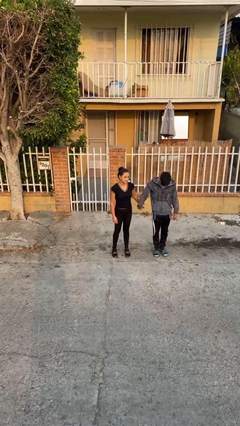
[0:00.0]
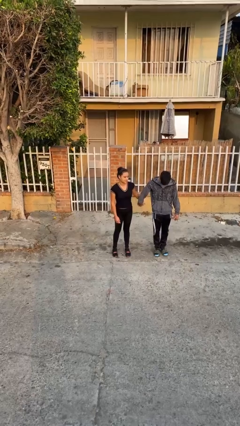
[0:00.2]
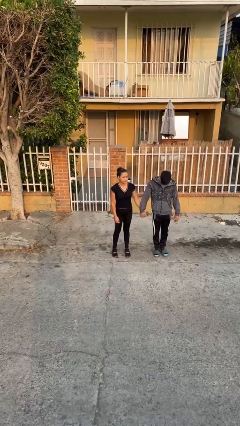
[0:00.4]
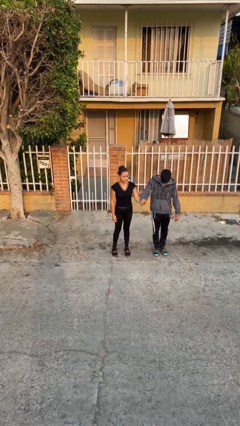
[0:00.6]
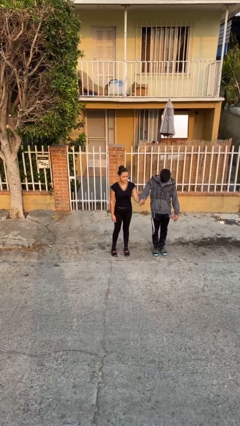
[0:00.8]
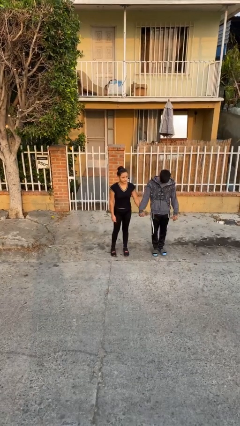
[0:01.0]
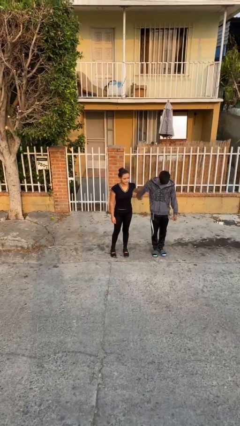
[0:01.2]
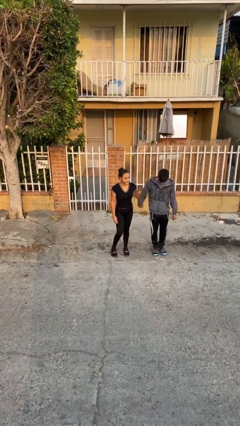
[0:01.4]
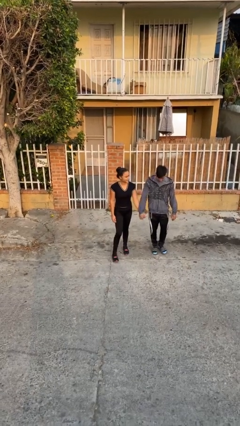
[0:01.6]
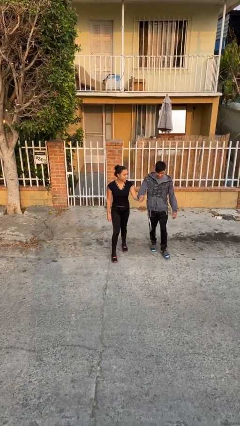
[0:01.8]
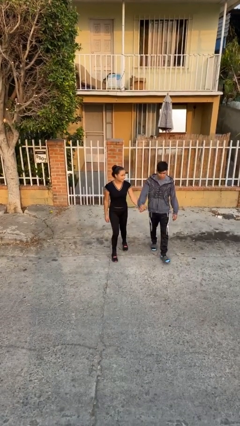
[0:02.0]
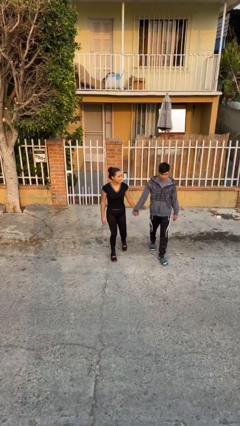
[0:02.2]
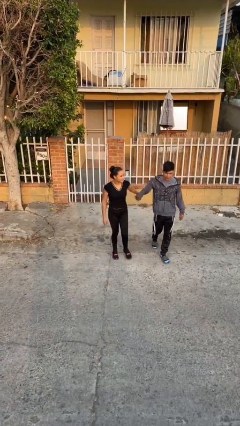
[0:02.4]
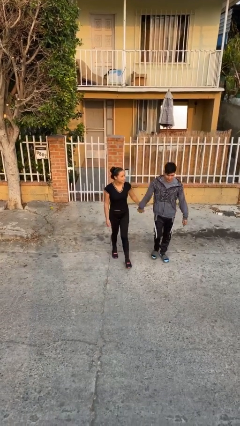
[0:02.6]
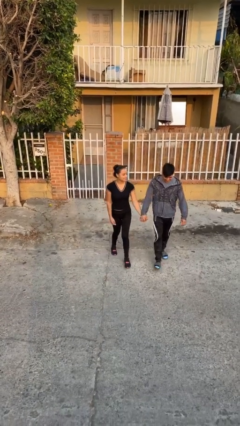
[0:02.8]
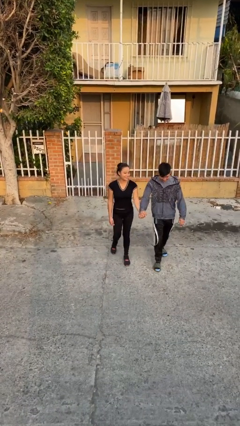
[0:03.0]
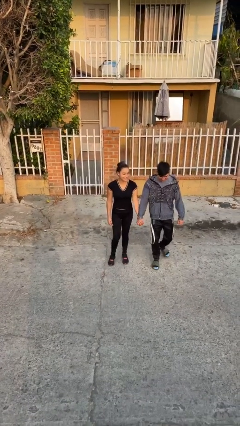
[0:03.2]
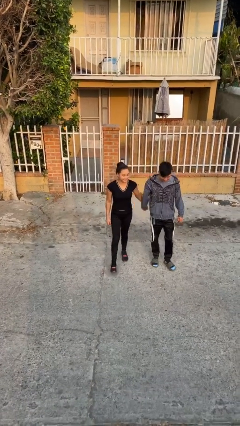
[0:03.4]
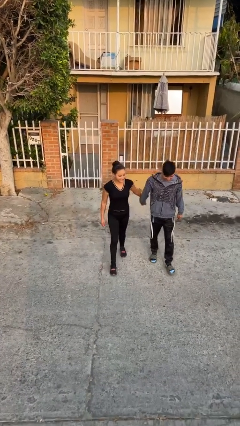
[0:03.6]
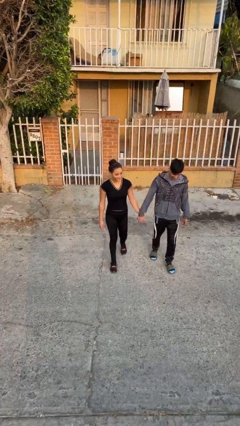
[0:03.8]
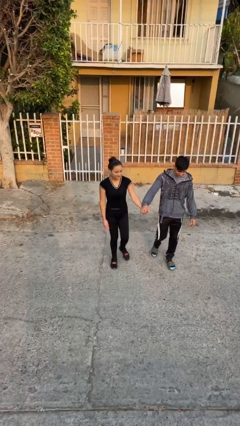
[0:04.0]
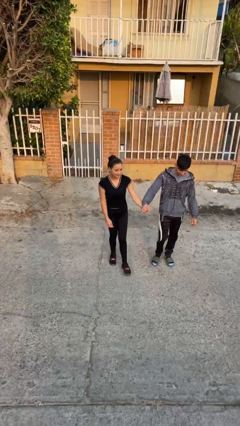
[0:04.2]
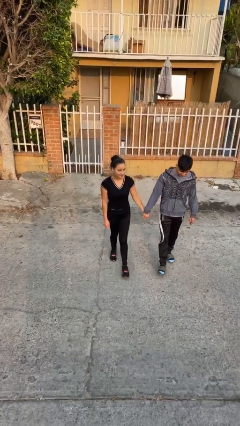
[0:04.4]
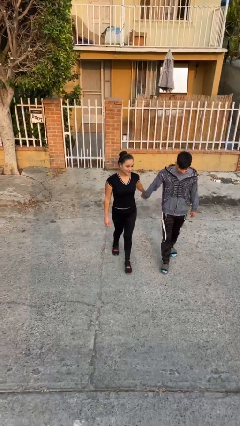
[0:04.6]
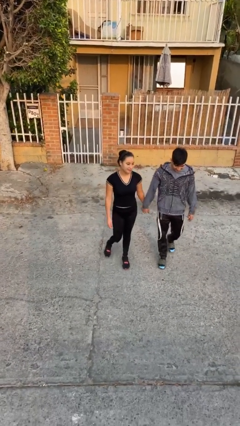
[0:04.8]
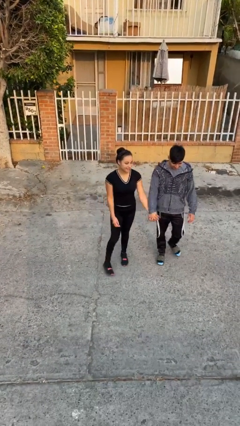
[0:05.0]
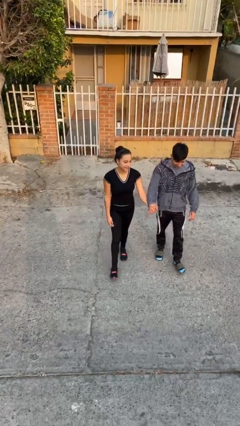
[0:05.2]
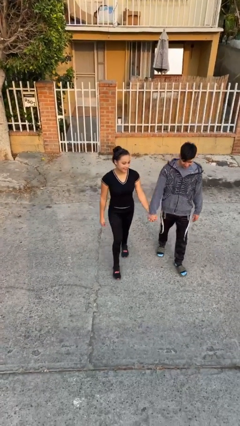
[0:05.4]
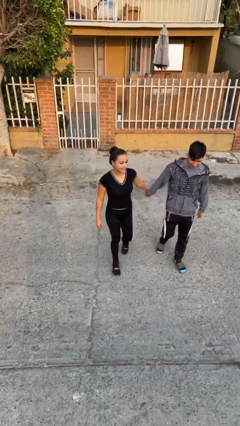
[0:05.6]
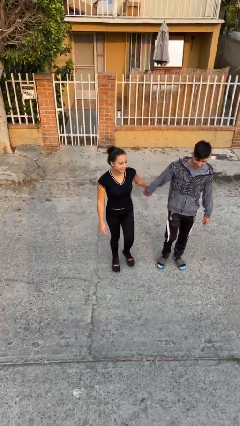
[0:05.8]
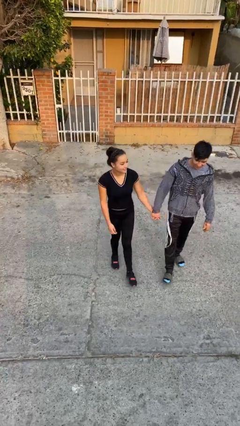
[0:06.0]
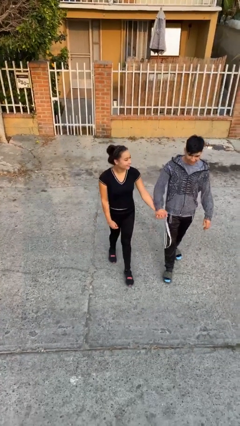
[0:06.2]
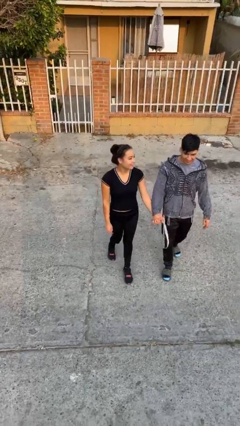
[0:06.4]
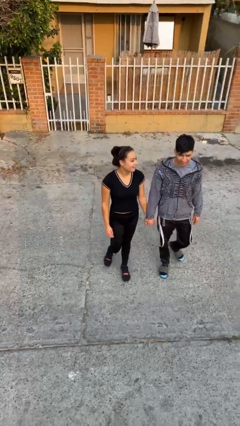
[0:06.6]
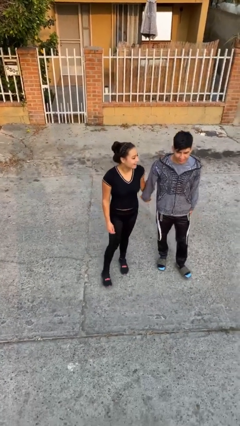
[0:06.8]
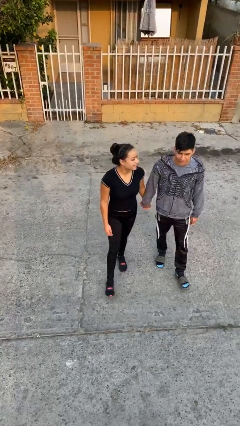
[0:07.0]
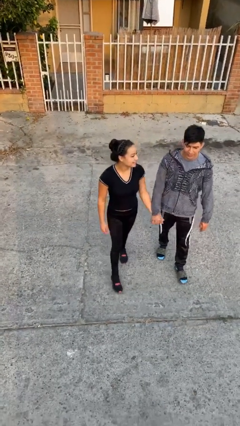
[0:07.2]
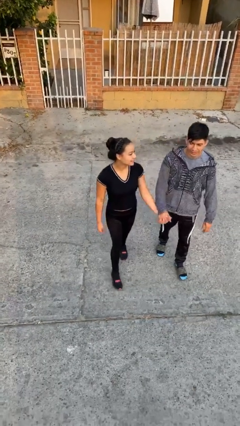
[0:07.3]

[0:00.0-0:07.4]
person holds hand

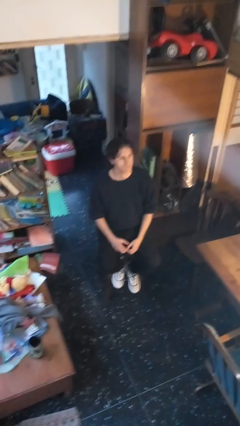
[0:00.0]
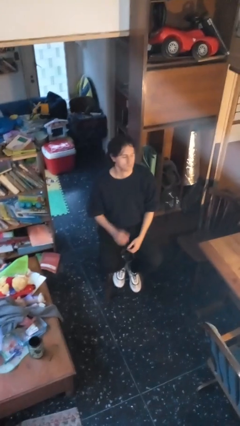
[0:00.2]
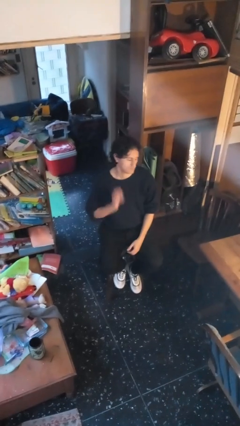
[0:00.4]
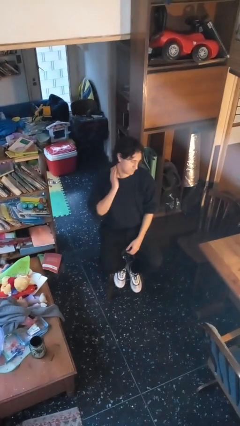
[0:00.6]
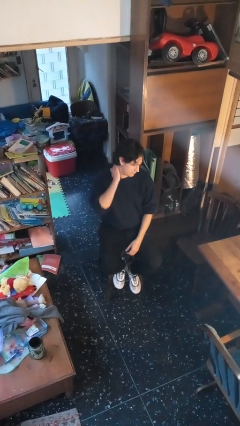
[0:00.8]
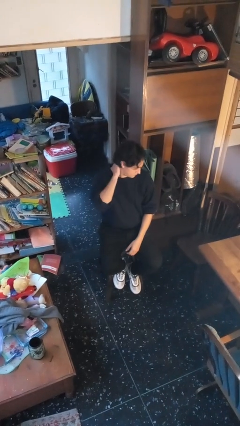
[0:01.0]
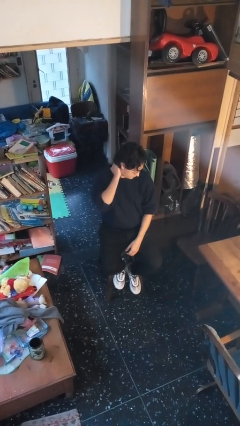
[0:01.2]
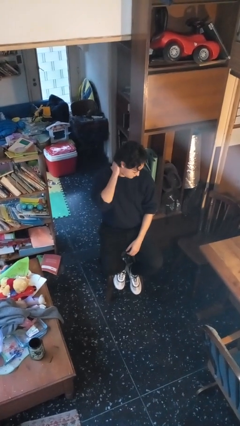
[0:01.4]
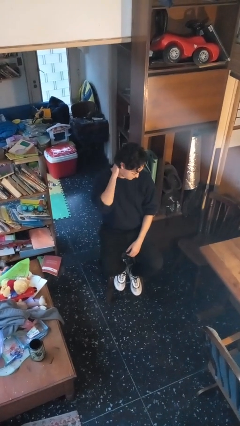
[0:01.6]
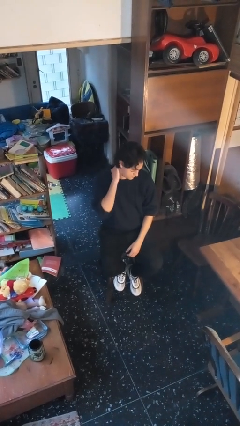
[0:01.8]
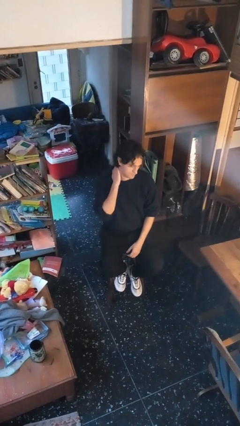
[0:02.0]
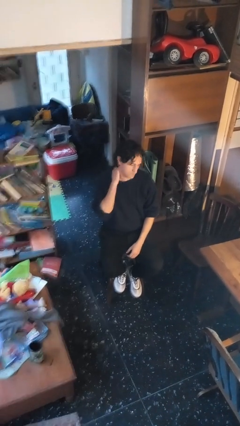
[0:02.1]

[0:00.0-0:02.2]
person rubs neck

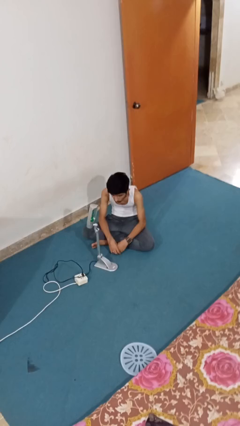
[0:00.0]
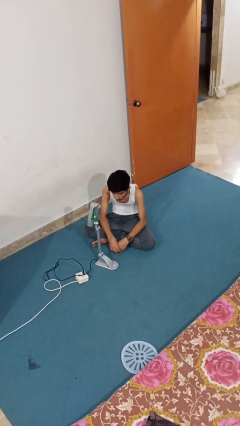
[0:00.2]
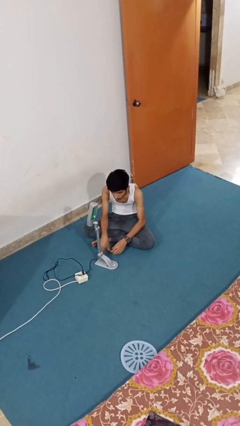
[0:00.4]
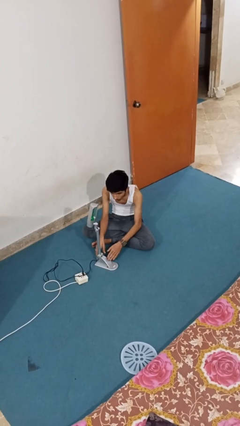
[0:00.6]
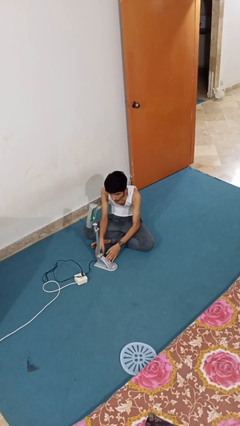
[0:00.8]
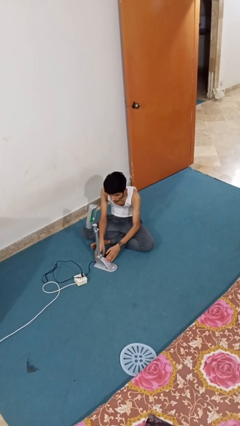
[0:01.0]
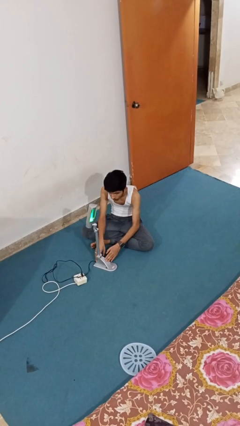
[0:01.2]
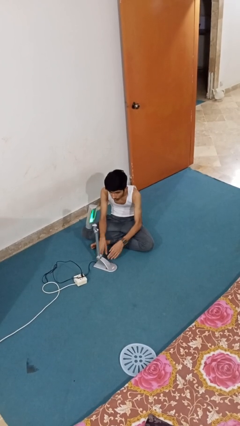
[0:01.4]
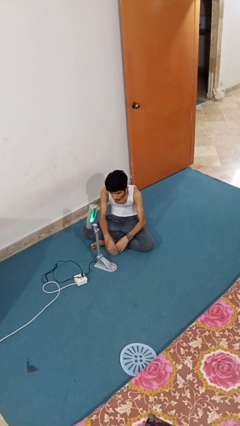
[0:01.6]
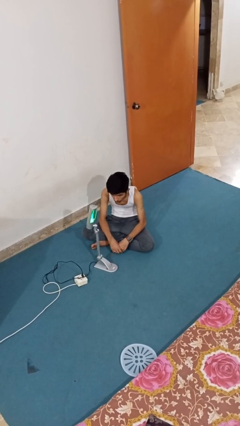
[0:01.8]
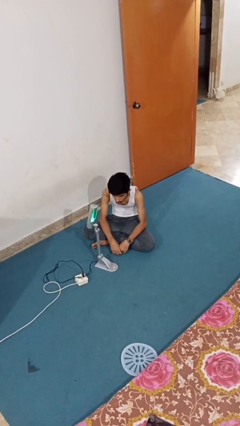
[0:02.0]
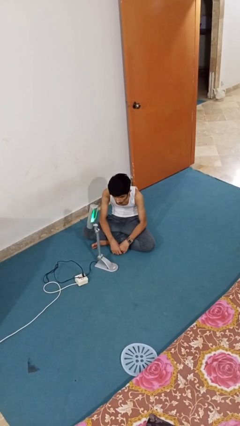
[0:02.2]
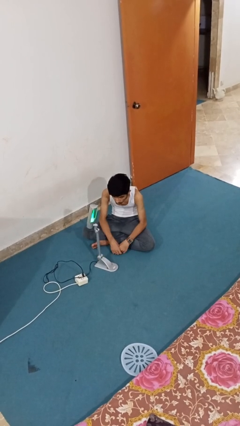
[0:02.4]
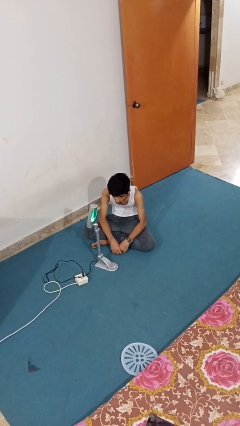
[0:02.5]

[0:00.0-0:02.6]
person turns on lamp

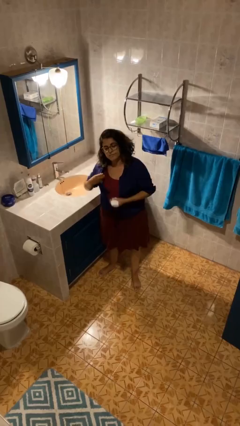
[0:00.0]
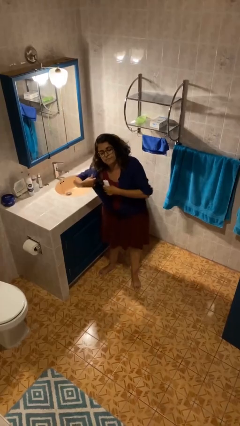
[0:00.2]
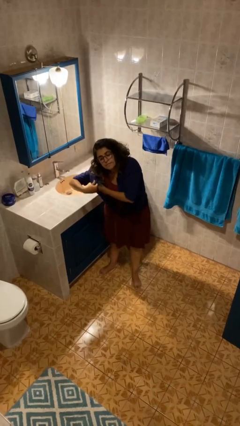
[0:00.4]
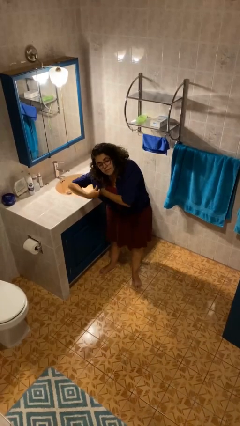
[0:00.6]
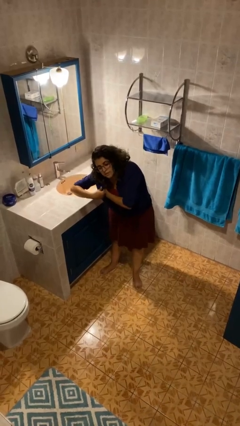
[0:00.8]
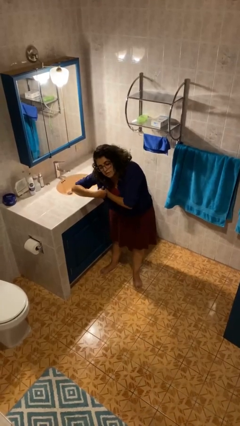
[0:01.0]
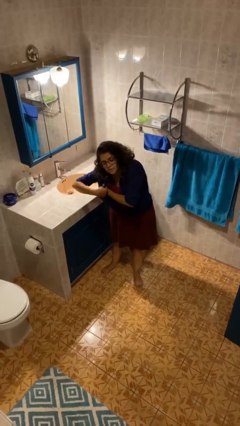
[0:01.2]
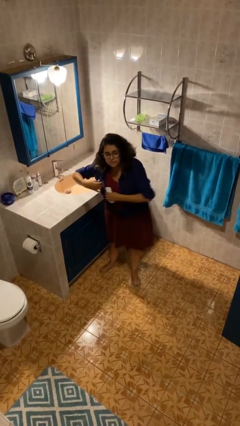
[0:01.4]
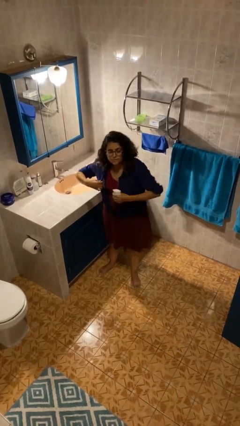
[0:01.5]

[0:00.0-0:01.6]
person applies deodorant

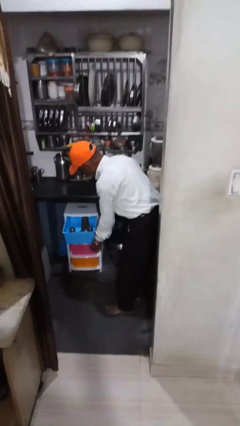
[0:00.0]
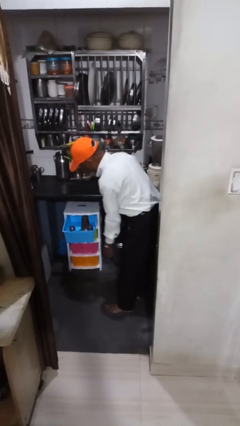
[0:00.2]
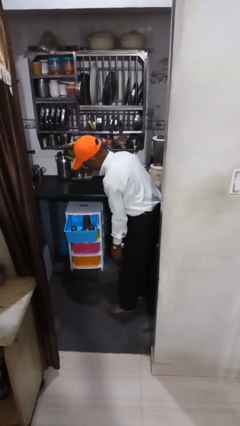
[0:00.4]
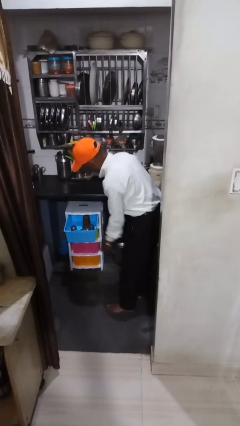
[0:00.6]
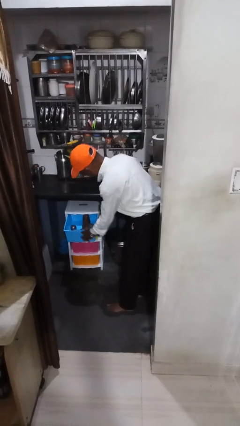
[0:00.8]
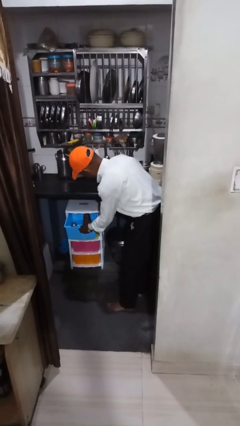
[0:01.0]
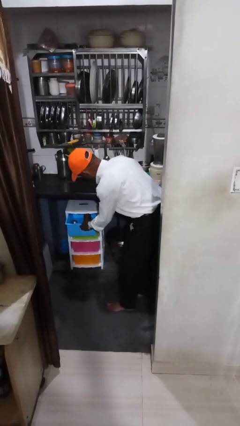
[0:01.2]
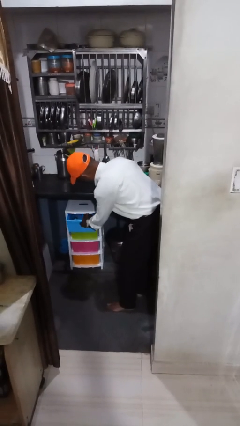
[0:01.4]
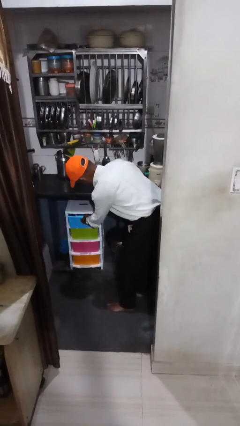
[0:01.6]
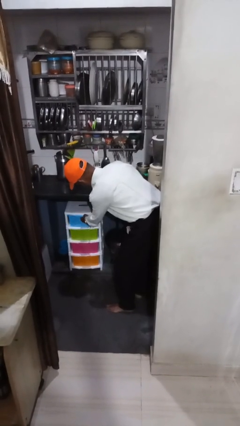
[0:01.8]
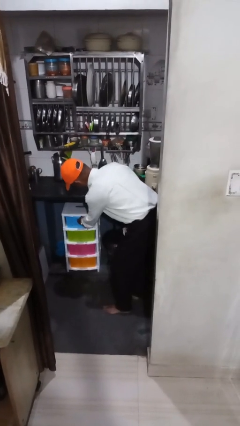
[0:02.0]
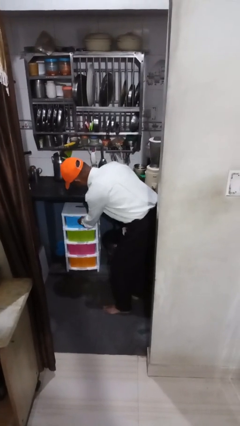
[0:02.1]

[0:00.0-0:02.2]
person closes kitchen drawer

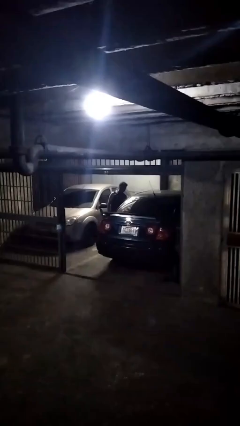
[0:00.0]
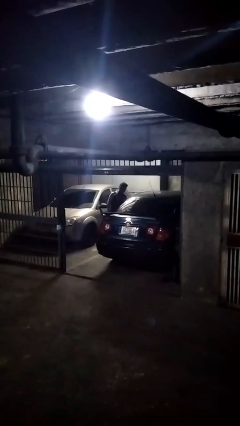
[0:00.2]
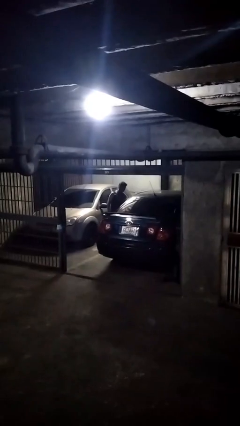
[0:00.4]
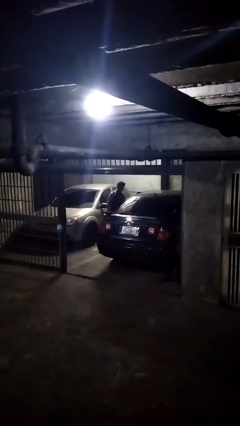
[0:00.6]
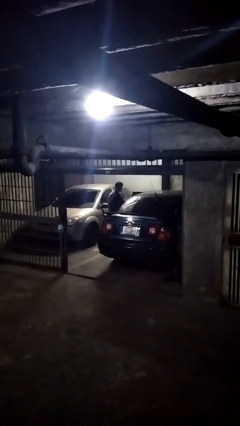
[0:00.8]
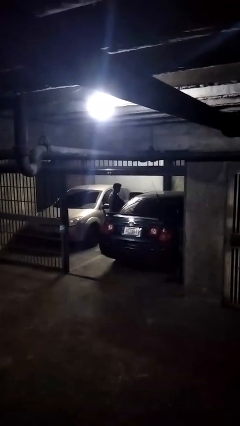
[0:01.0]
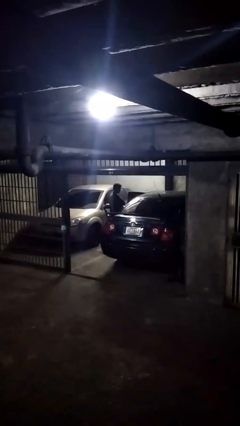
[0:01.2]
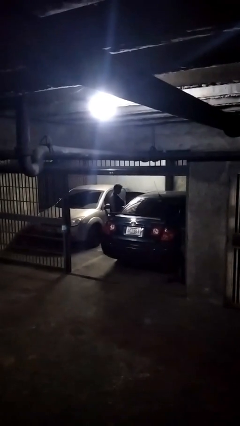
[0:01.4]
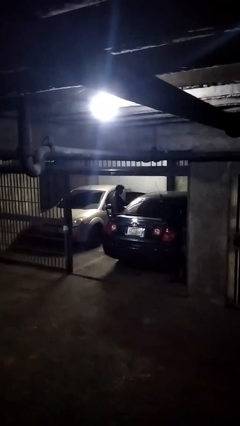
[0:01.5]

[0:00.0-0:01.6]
person opens car door
